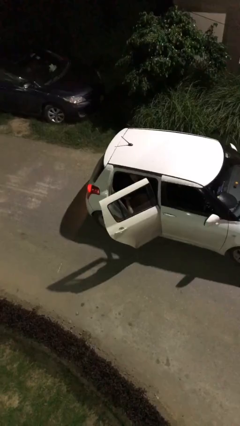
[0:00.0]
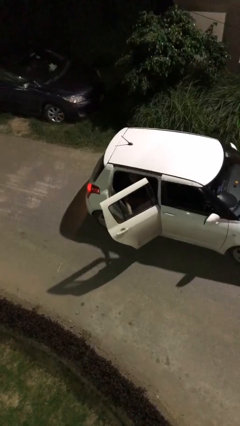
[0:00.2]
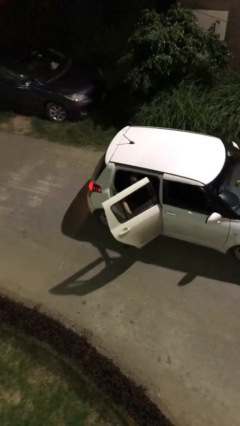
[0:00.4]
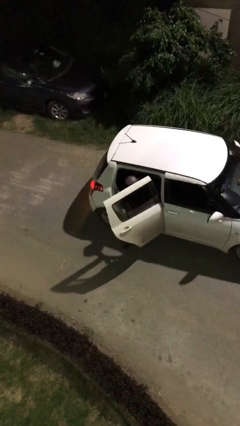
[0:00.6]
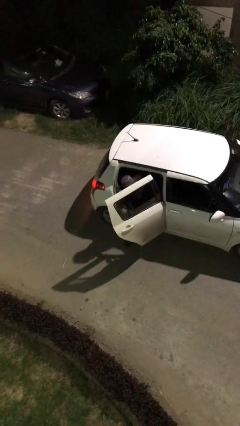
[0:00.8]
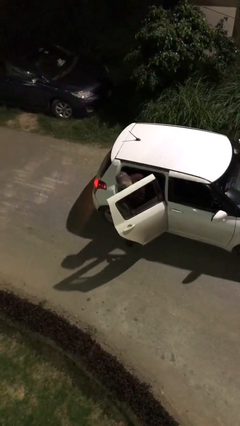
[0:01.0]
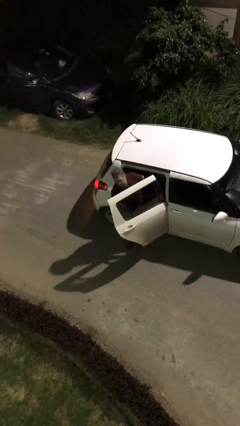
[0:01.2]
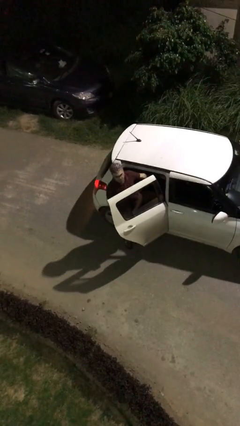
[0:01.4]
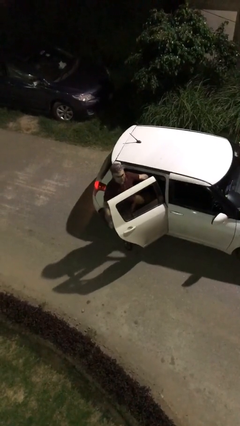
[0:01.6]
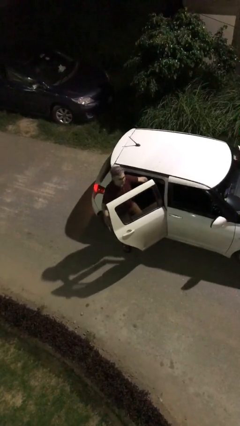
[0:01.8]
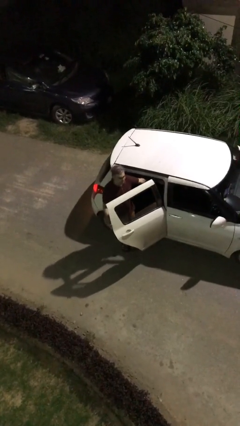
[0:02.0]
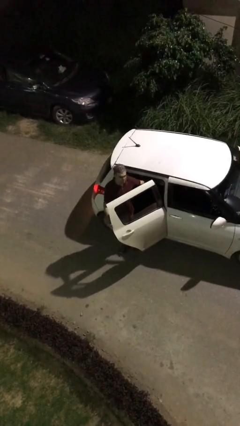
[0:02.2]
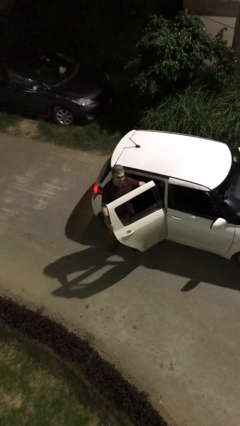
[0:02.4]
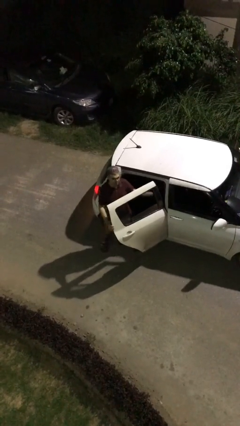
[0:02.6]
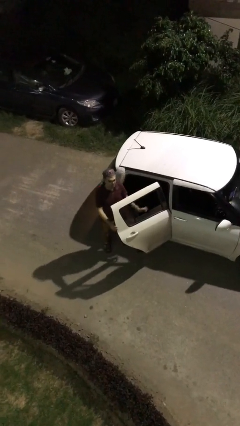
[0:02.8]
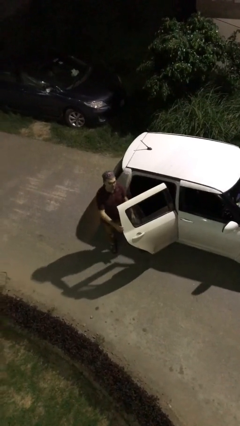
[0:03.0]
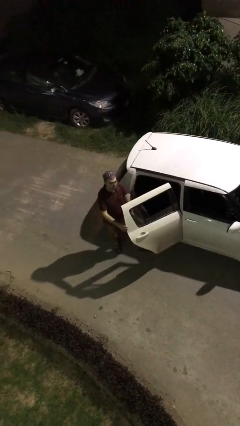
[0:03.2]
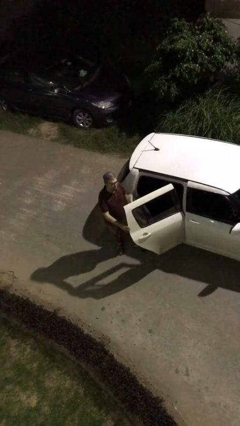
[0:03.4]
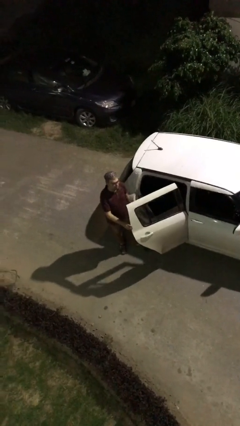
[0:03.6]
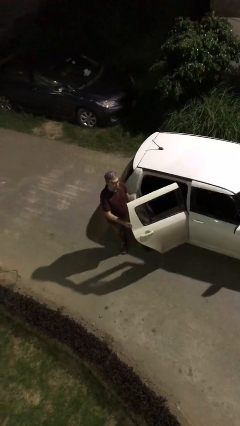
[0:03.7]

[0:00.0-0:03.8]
person exits car

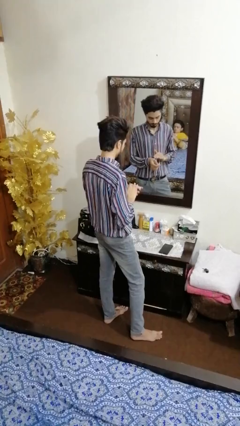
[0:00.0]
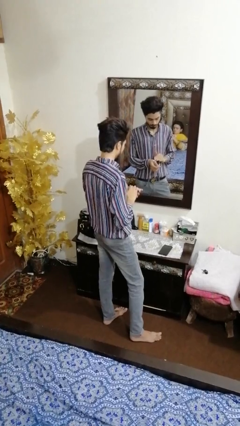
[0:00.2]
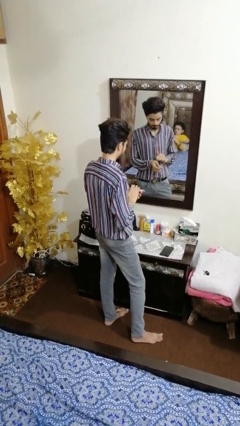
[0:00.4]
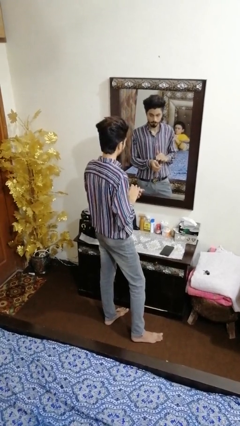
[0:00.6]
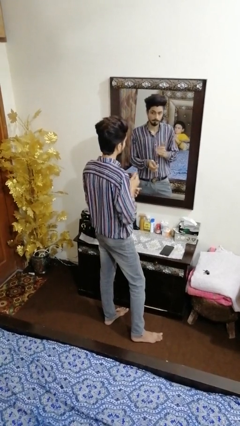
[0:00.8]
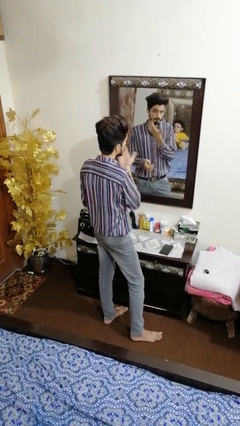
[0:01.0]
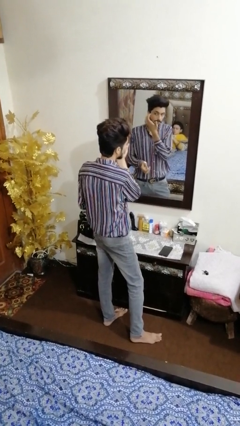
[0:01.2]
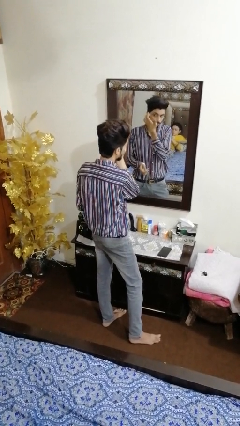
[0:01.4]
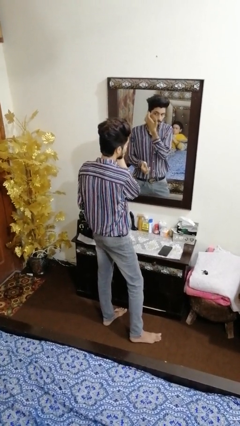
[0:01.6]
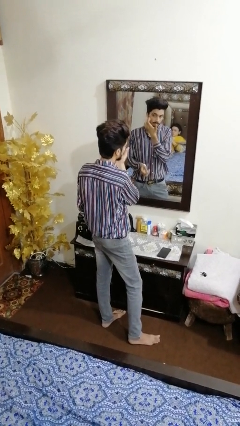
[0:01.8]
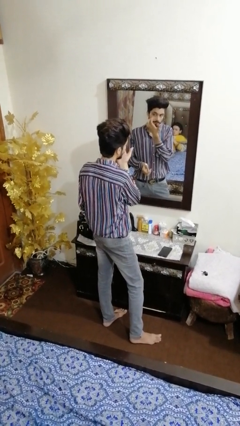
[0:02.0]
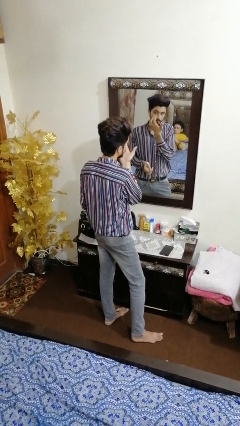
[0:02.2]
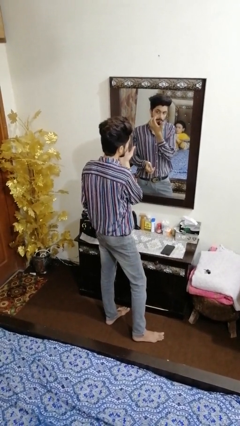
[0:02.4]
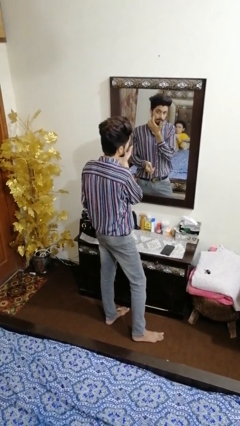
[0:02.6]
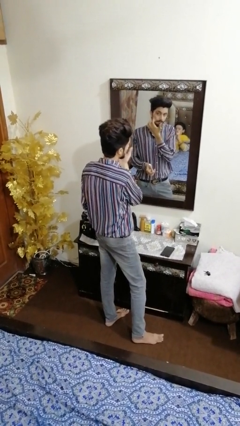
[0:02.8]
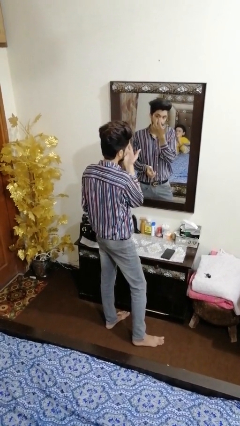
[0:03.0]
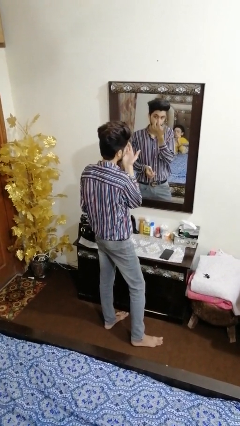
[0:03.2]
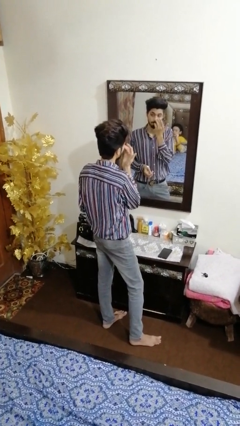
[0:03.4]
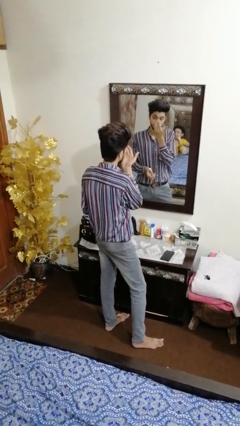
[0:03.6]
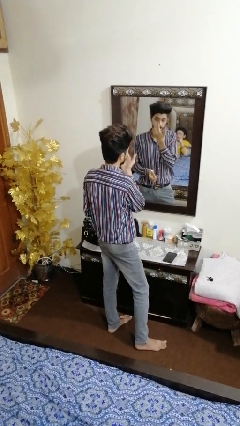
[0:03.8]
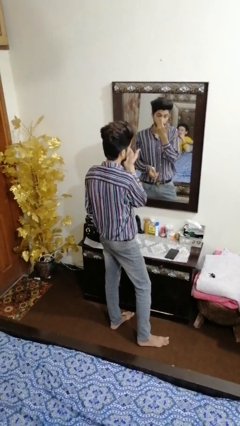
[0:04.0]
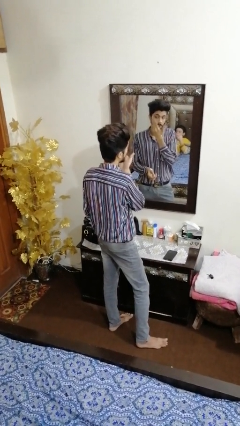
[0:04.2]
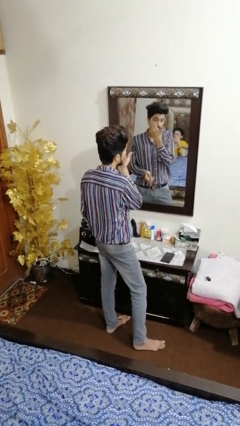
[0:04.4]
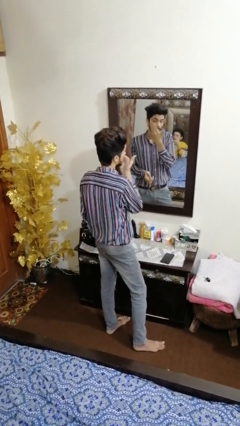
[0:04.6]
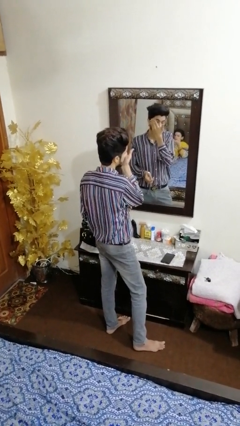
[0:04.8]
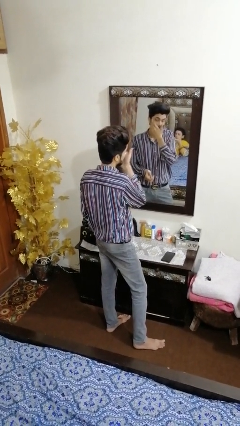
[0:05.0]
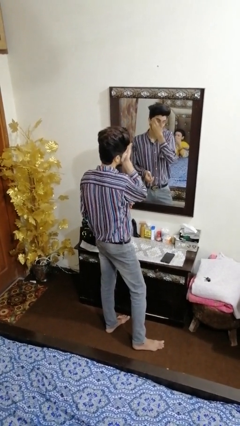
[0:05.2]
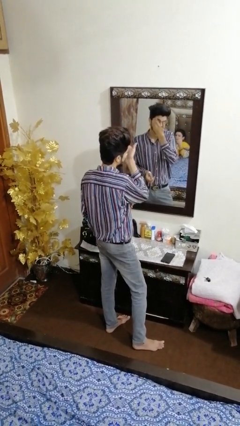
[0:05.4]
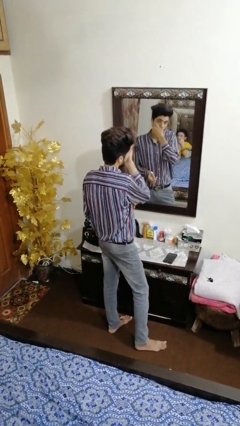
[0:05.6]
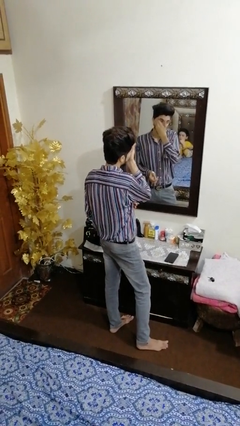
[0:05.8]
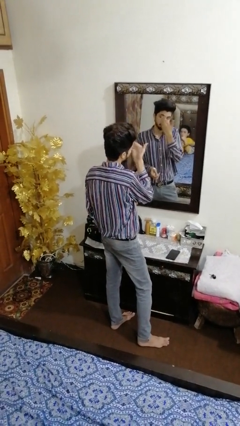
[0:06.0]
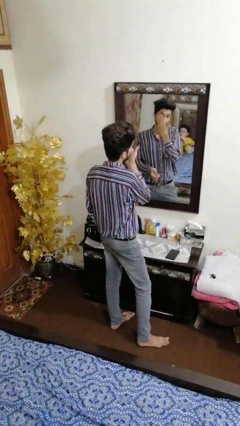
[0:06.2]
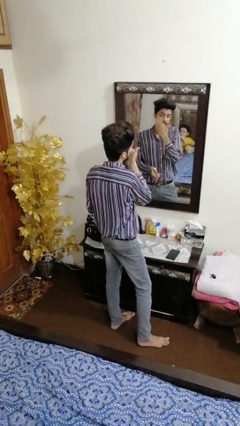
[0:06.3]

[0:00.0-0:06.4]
person applies foundation makeup

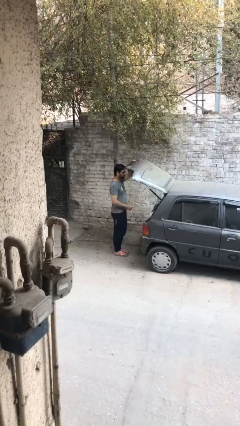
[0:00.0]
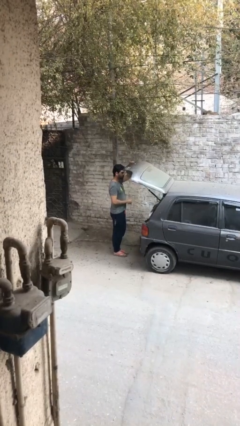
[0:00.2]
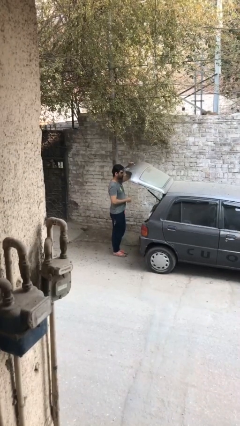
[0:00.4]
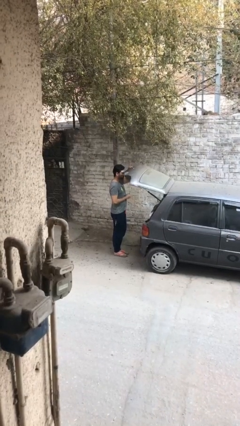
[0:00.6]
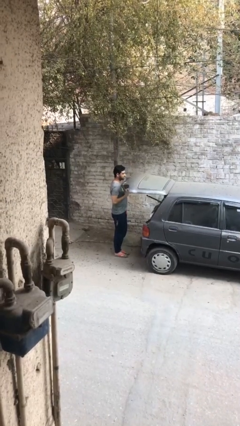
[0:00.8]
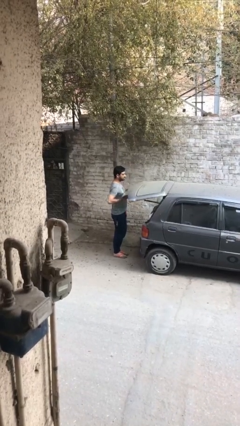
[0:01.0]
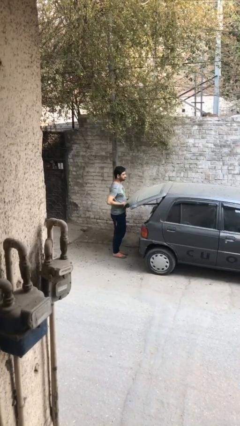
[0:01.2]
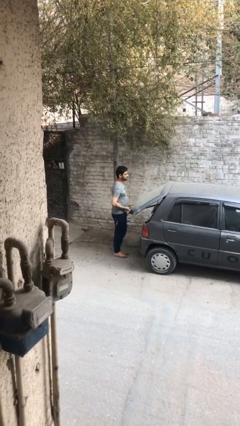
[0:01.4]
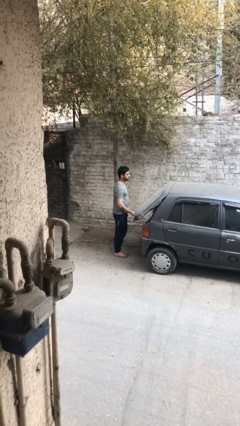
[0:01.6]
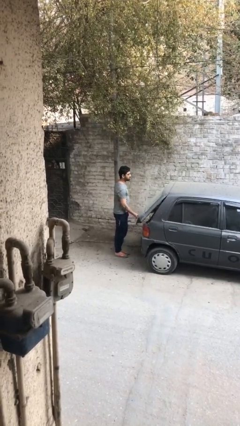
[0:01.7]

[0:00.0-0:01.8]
person closes car trunk

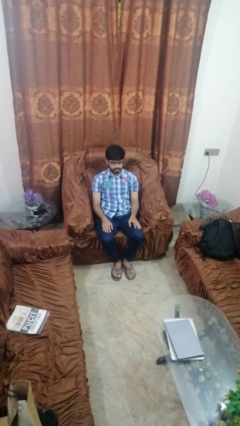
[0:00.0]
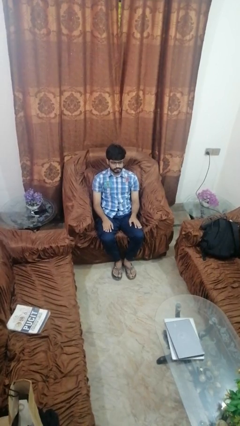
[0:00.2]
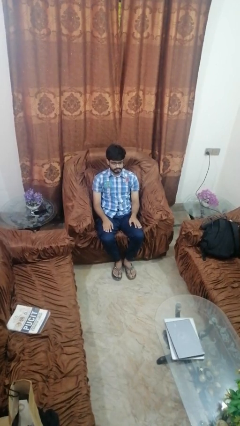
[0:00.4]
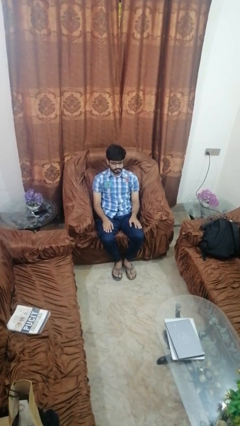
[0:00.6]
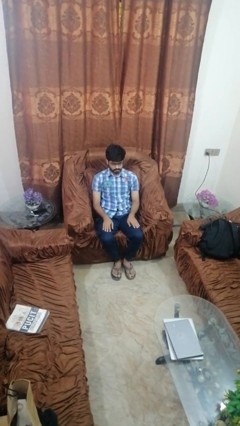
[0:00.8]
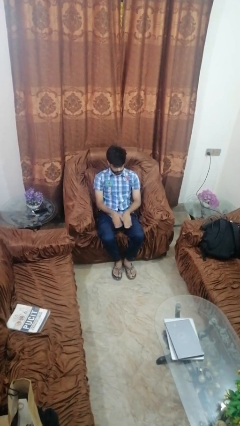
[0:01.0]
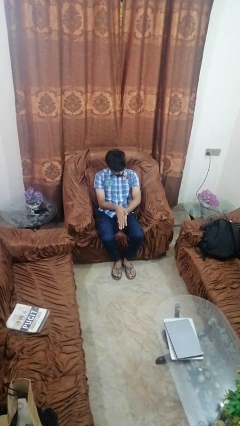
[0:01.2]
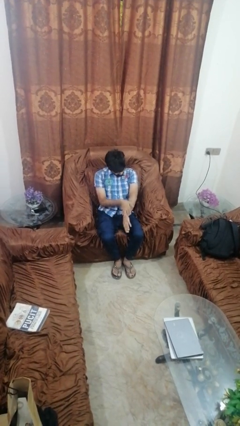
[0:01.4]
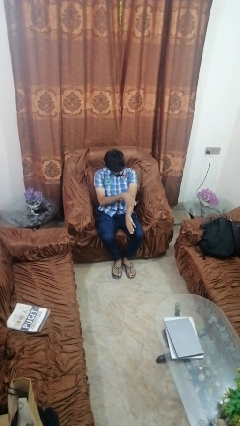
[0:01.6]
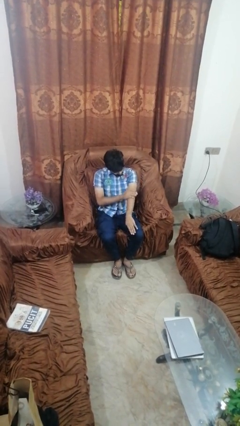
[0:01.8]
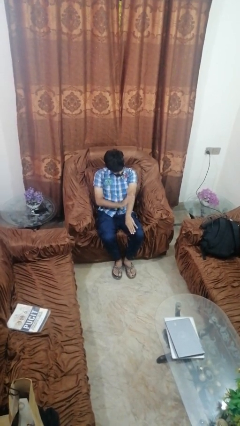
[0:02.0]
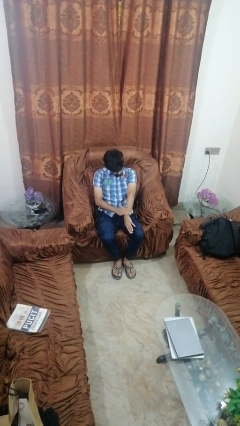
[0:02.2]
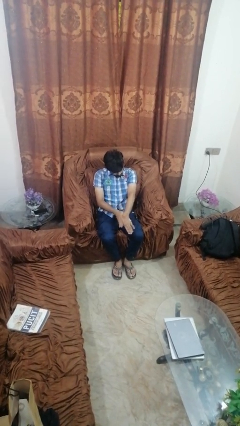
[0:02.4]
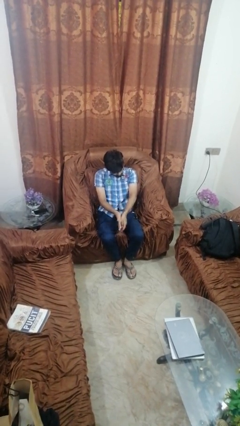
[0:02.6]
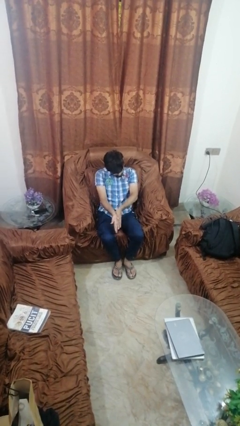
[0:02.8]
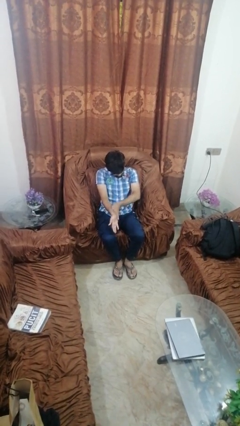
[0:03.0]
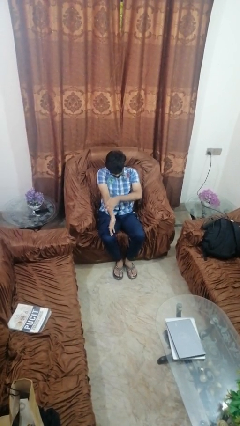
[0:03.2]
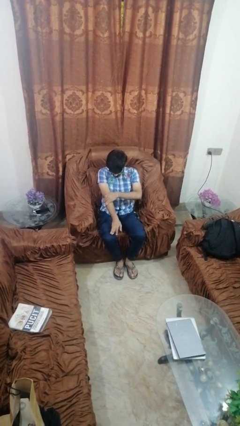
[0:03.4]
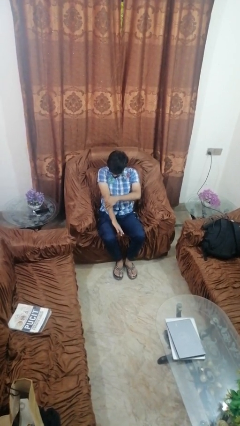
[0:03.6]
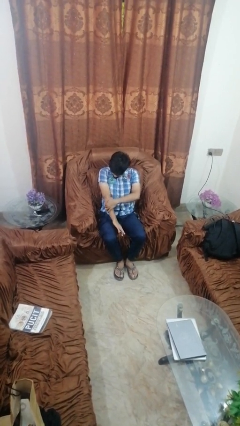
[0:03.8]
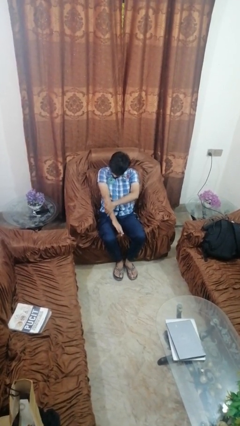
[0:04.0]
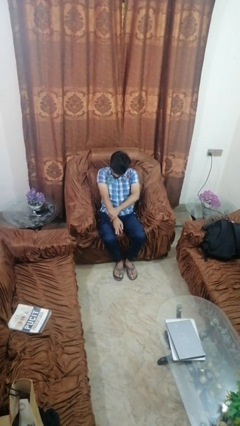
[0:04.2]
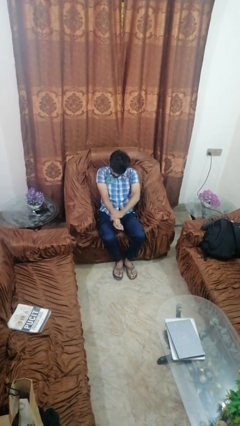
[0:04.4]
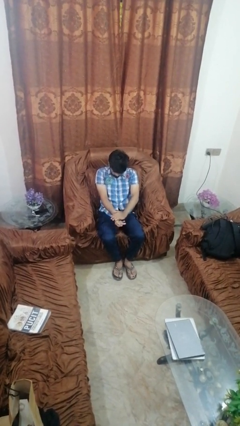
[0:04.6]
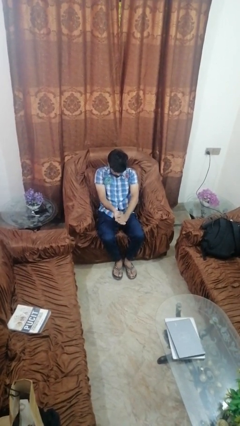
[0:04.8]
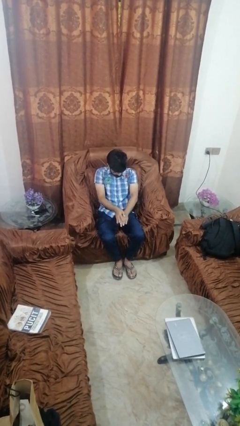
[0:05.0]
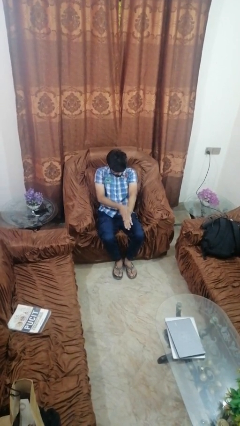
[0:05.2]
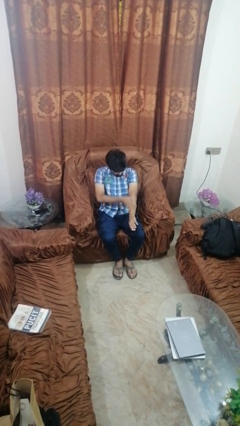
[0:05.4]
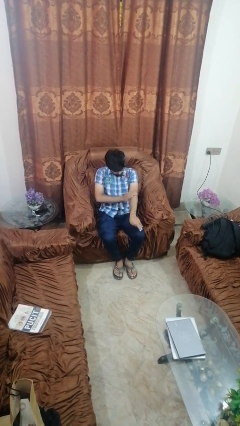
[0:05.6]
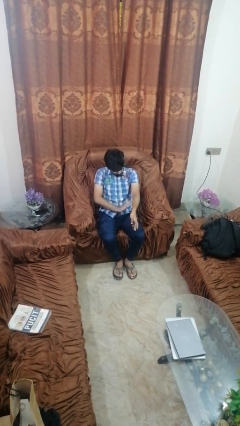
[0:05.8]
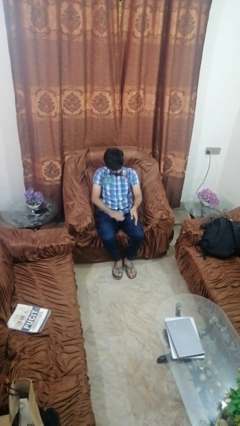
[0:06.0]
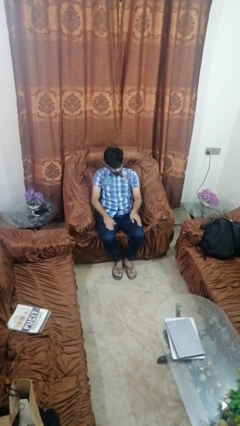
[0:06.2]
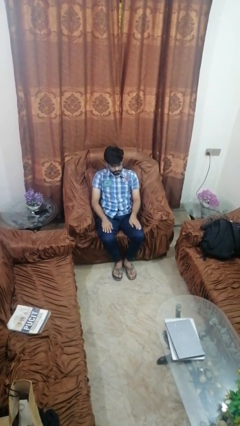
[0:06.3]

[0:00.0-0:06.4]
person looks at hands in lap
